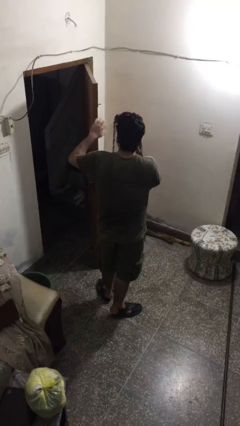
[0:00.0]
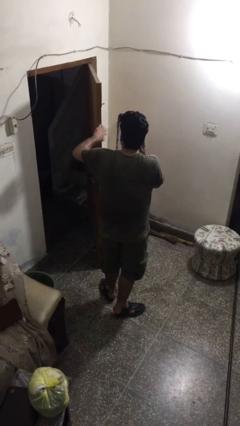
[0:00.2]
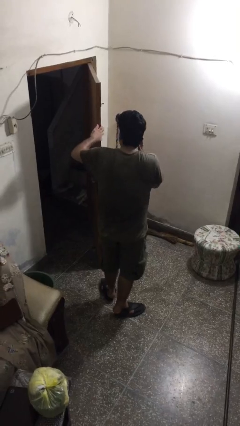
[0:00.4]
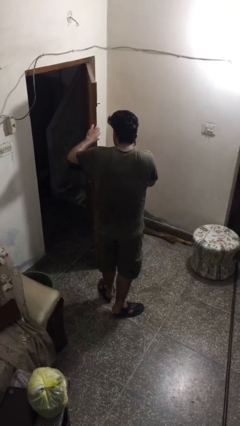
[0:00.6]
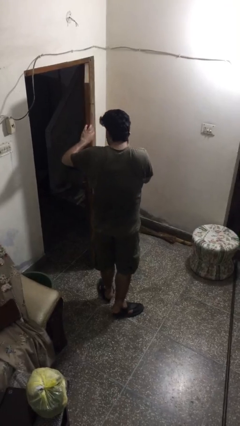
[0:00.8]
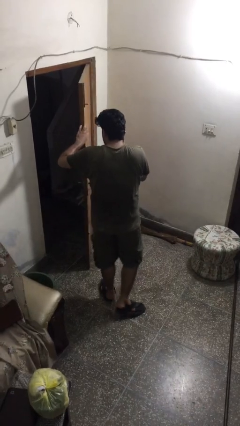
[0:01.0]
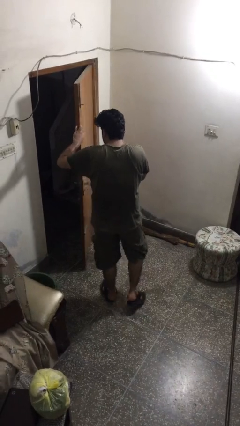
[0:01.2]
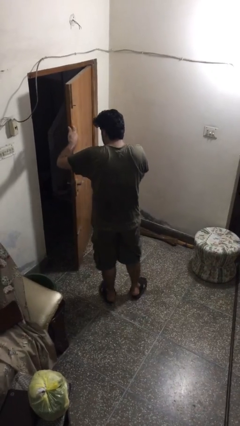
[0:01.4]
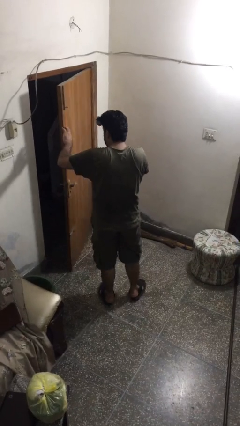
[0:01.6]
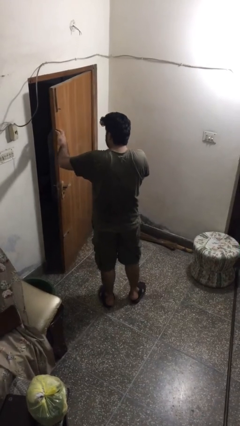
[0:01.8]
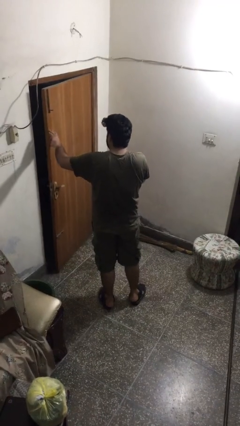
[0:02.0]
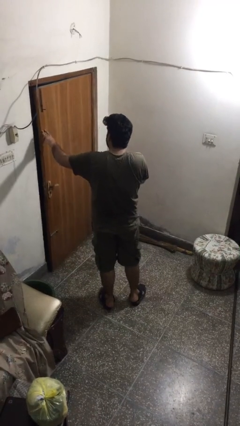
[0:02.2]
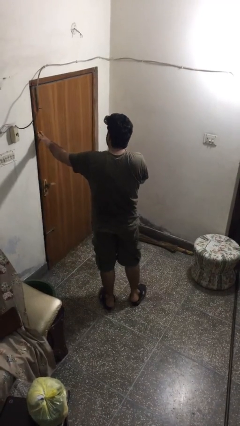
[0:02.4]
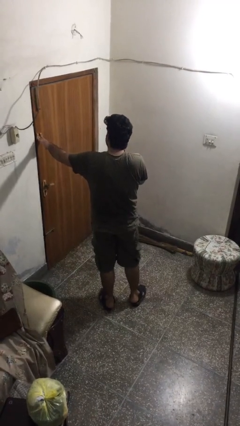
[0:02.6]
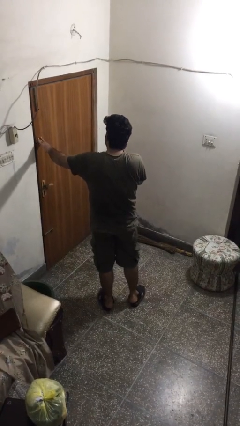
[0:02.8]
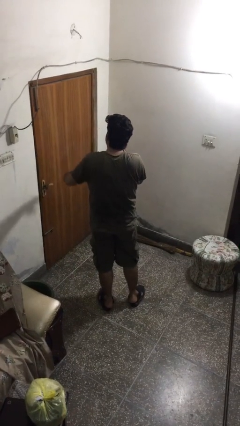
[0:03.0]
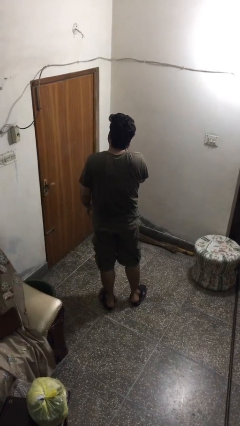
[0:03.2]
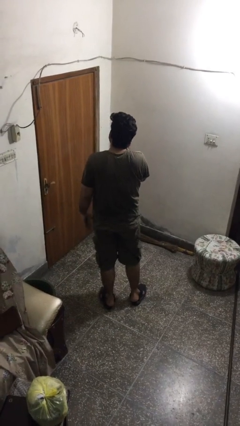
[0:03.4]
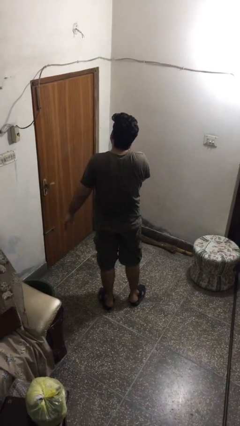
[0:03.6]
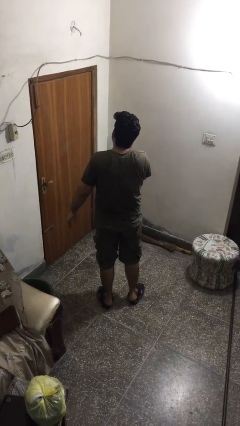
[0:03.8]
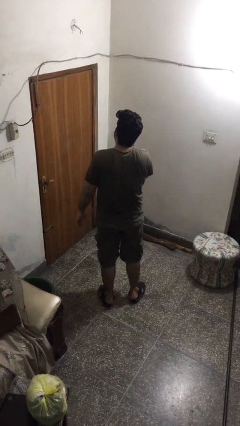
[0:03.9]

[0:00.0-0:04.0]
person closes facility door

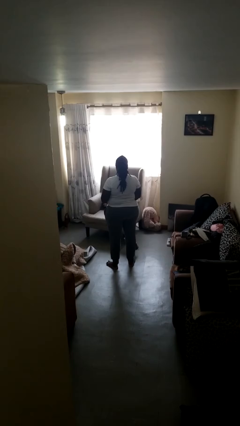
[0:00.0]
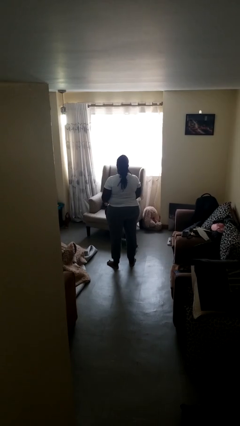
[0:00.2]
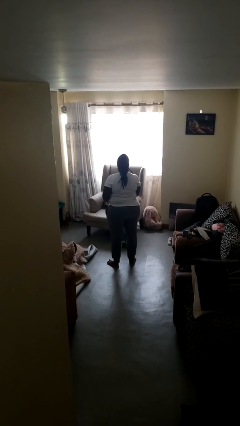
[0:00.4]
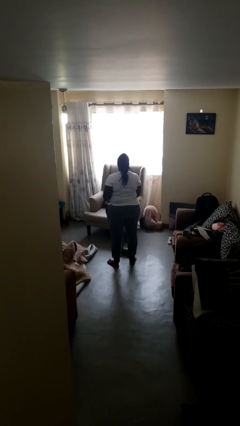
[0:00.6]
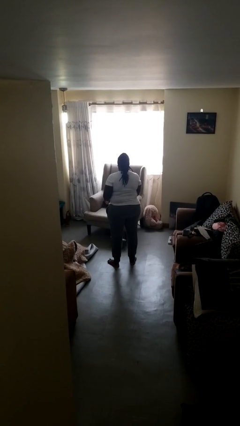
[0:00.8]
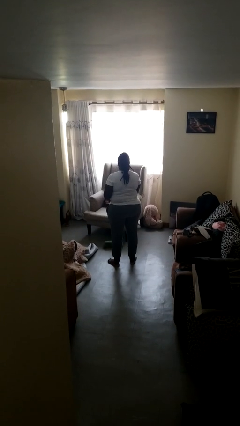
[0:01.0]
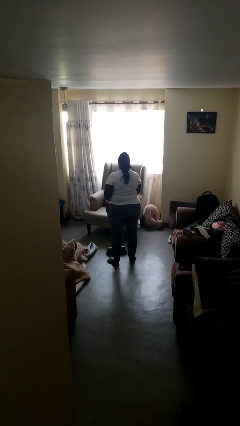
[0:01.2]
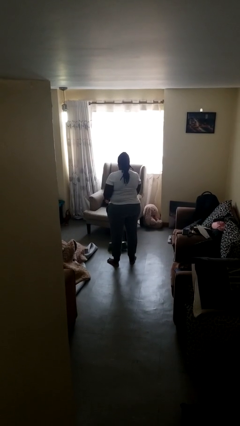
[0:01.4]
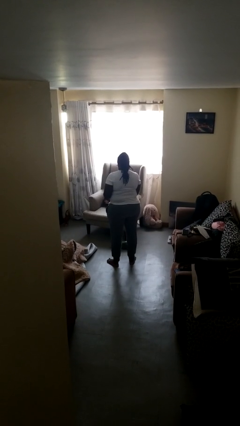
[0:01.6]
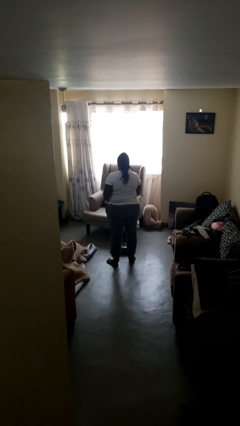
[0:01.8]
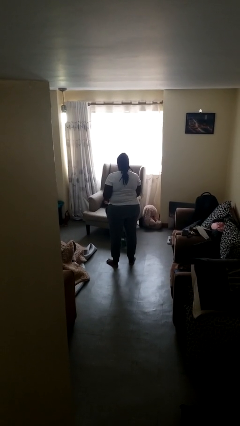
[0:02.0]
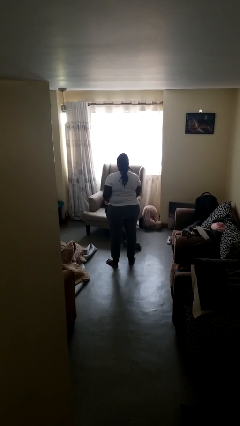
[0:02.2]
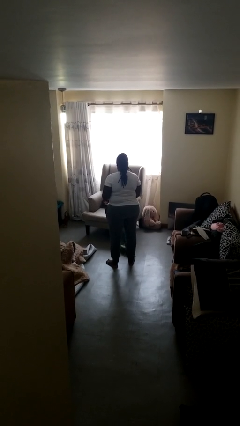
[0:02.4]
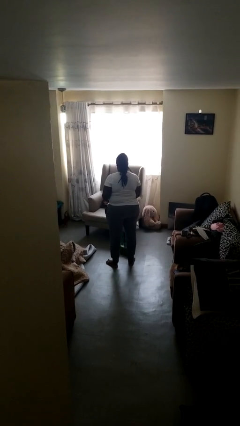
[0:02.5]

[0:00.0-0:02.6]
person sweeps floor

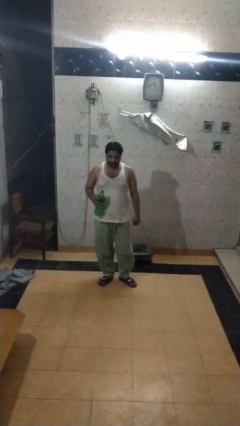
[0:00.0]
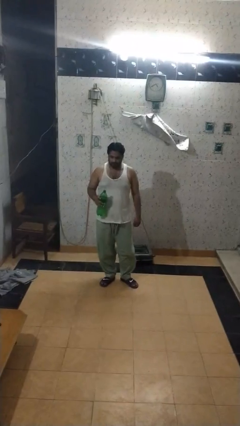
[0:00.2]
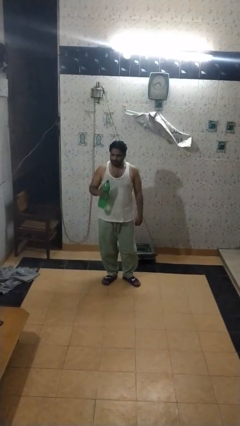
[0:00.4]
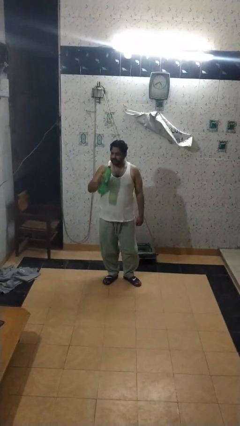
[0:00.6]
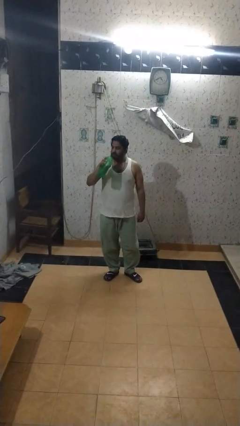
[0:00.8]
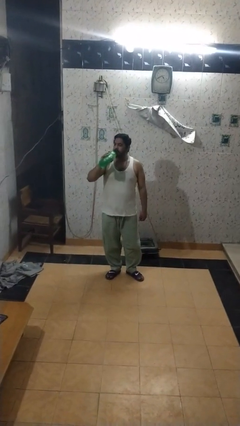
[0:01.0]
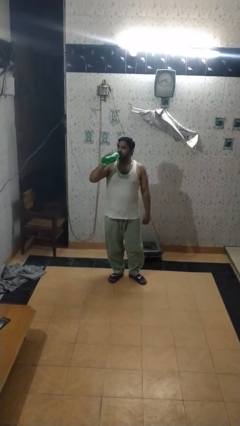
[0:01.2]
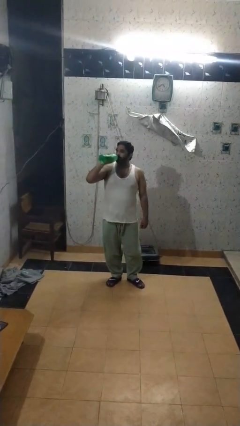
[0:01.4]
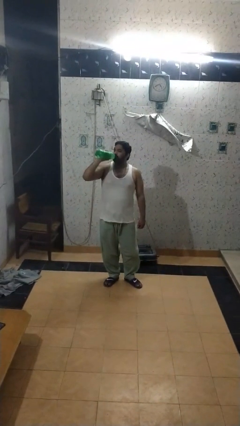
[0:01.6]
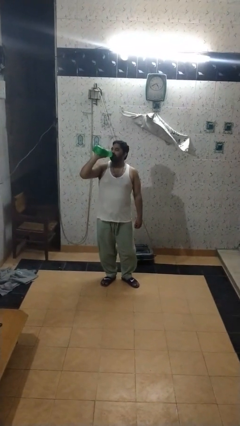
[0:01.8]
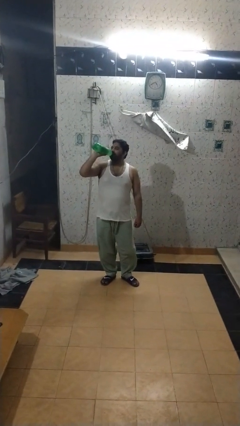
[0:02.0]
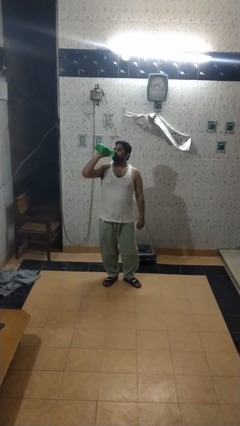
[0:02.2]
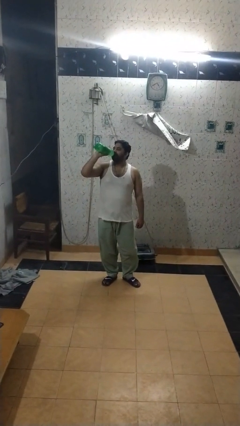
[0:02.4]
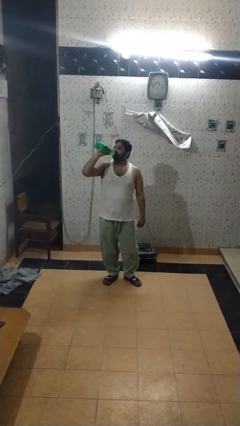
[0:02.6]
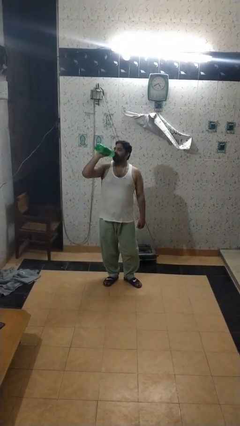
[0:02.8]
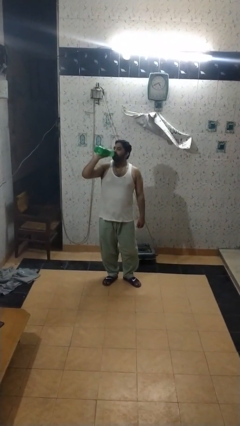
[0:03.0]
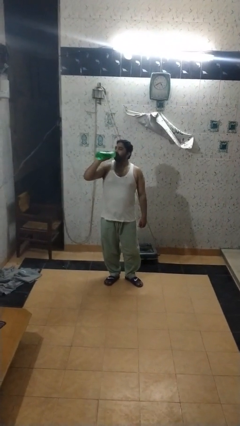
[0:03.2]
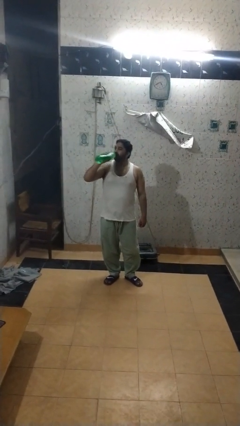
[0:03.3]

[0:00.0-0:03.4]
person drinks from bottle

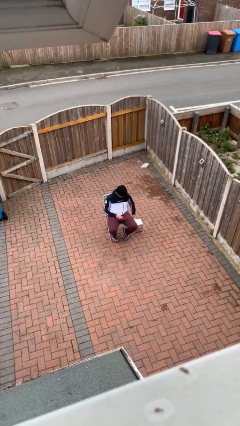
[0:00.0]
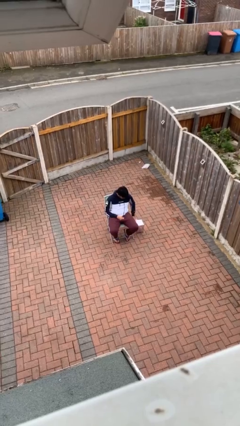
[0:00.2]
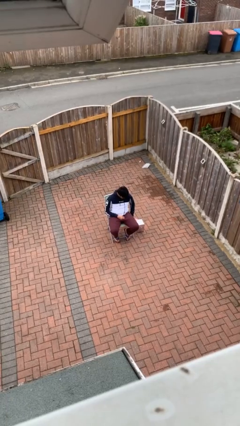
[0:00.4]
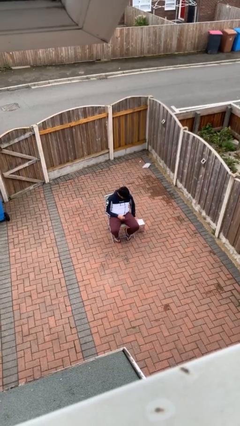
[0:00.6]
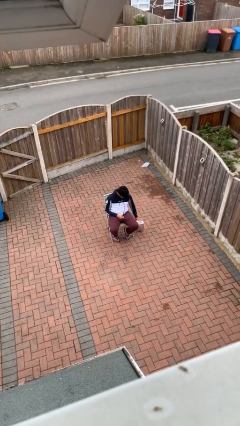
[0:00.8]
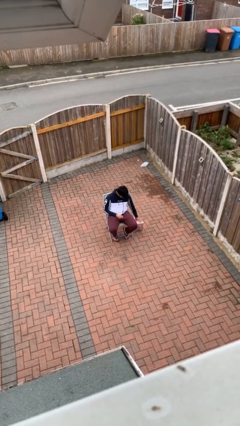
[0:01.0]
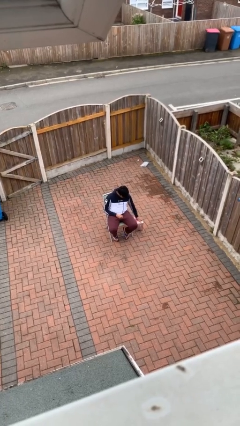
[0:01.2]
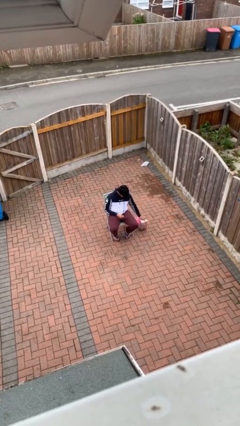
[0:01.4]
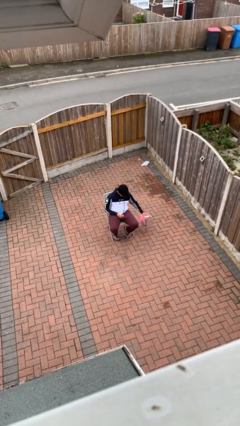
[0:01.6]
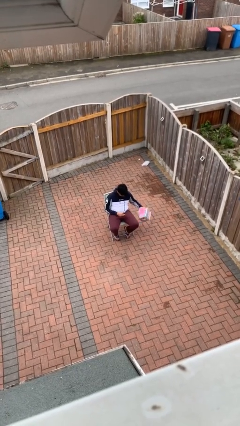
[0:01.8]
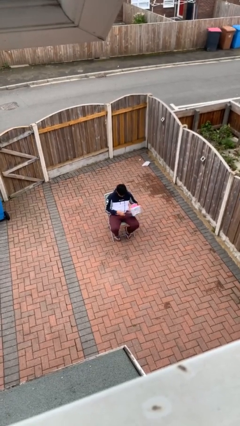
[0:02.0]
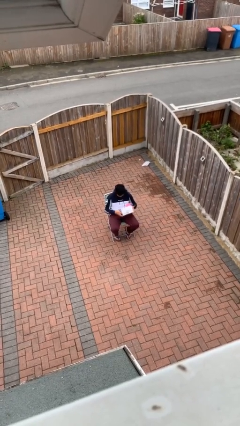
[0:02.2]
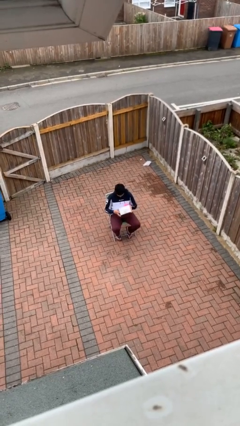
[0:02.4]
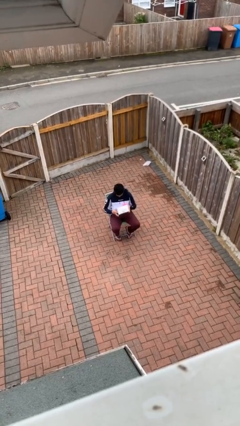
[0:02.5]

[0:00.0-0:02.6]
person picks up object from floor

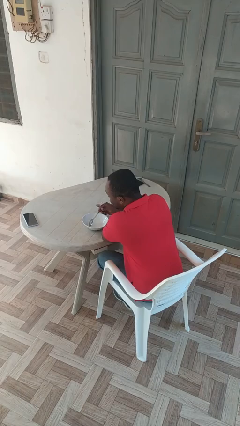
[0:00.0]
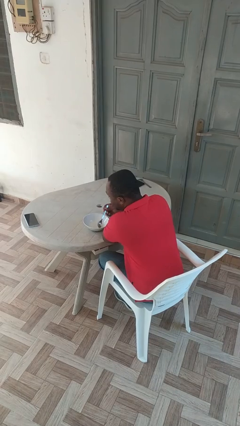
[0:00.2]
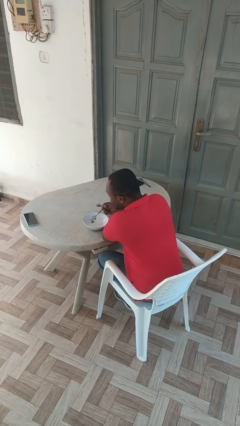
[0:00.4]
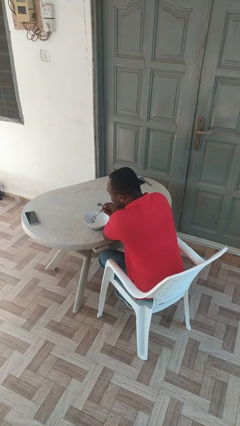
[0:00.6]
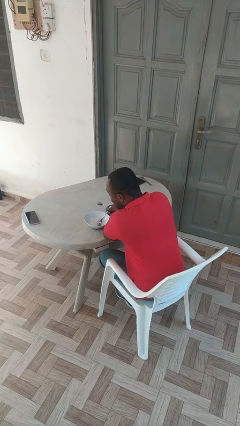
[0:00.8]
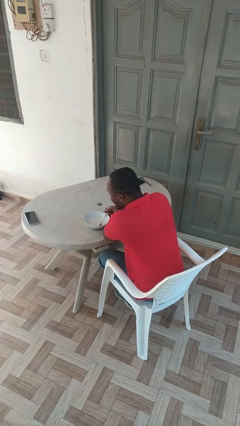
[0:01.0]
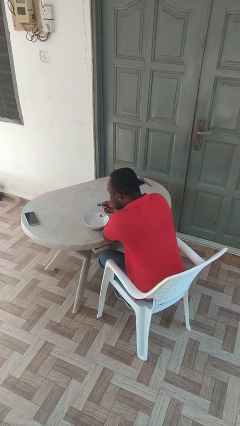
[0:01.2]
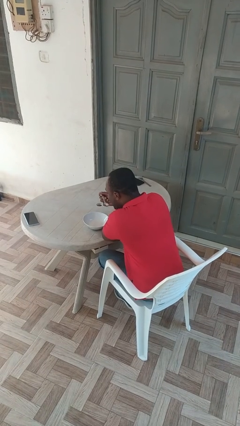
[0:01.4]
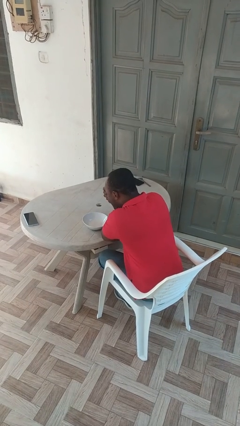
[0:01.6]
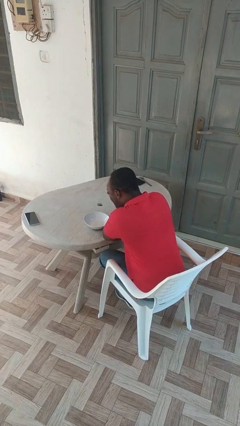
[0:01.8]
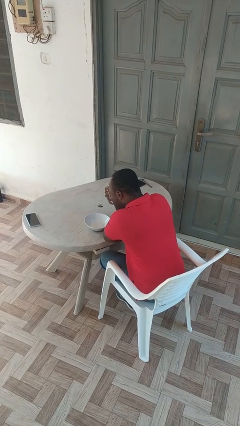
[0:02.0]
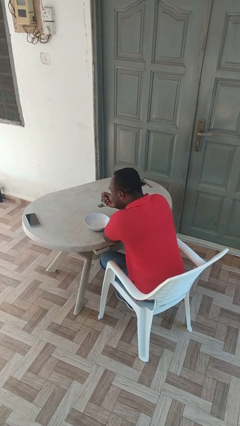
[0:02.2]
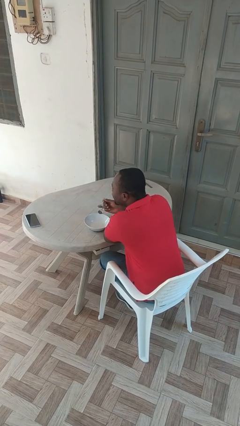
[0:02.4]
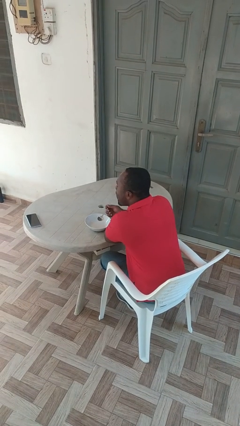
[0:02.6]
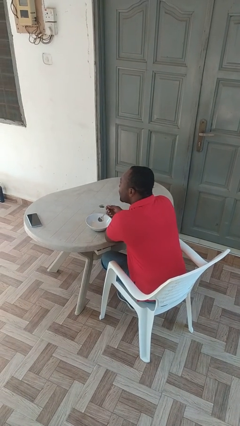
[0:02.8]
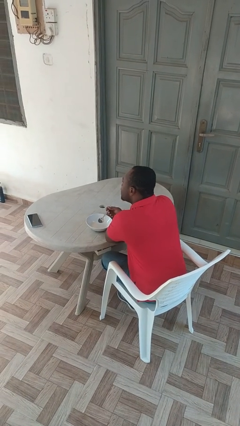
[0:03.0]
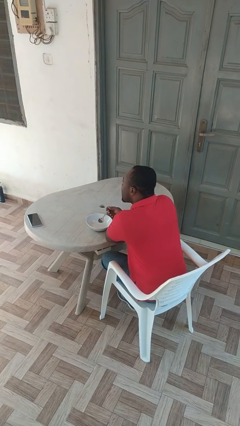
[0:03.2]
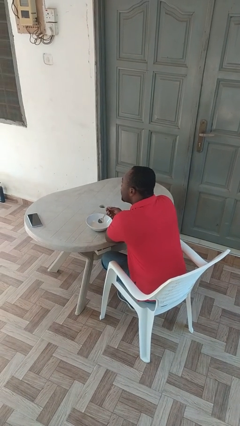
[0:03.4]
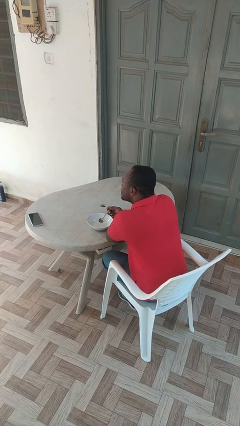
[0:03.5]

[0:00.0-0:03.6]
person eats with utensil

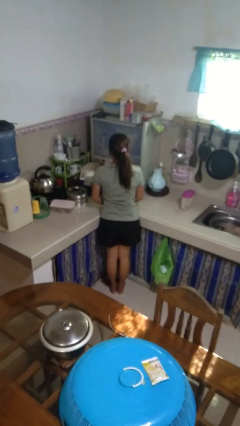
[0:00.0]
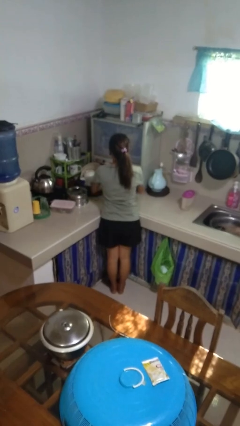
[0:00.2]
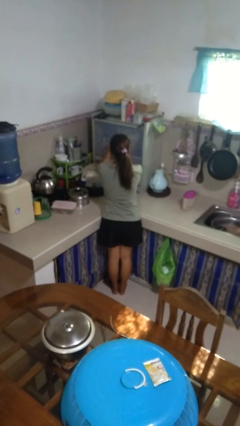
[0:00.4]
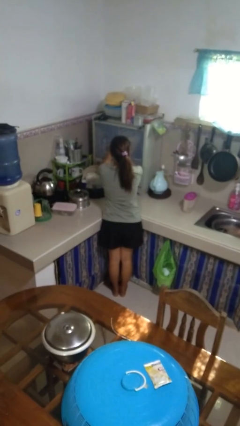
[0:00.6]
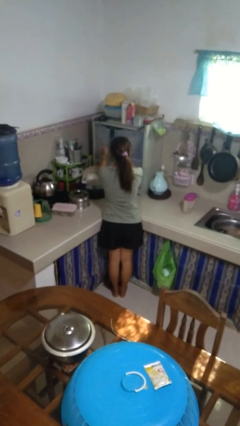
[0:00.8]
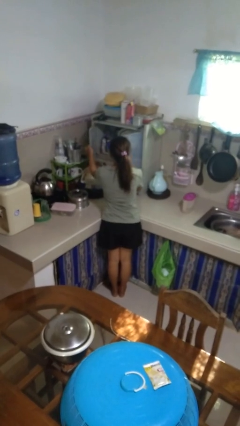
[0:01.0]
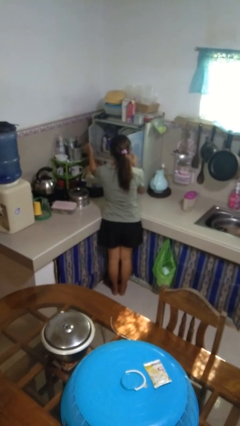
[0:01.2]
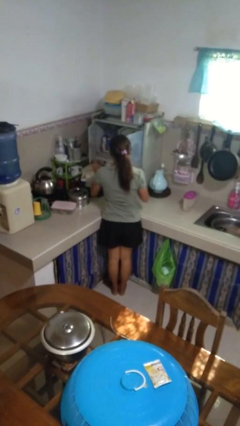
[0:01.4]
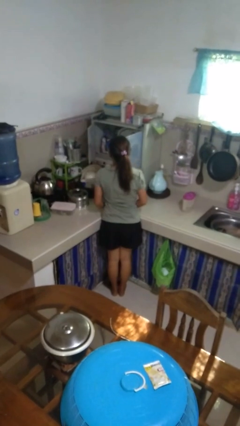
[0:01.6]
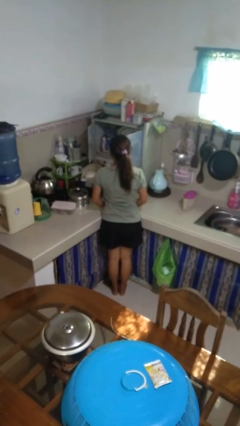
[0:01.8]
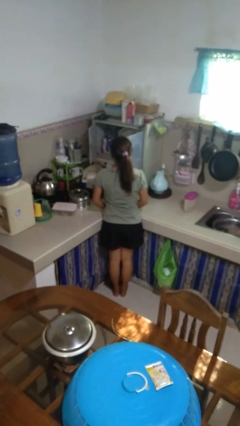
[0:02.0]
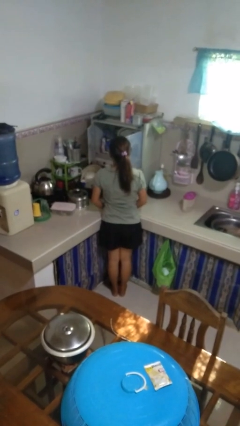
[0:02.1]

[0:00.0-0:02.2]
person opens kitchen drawer
